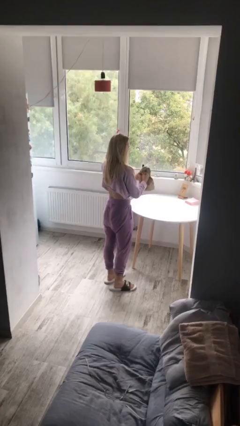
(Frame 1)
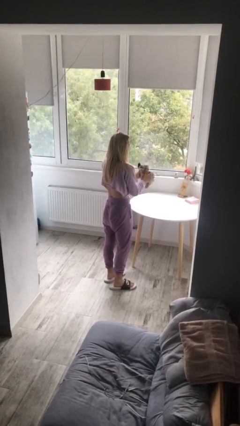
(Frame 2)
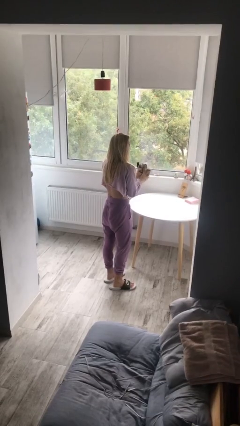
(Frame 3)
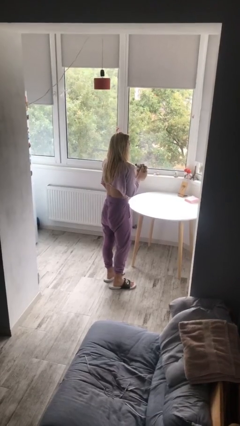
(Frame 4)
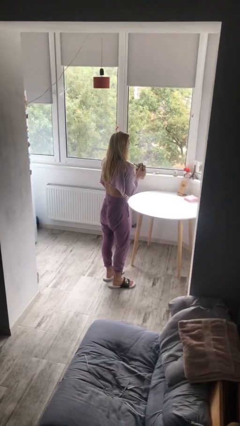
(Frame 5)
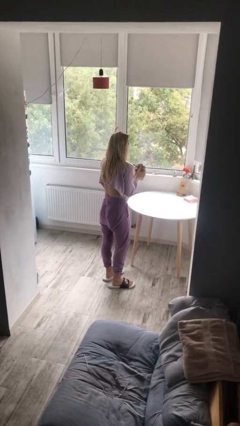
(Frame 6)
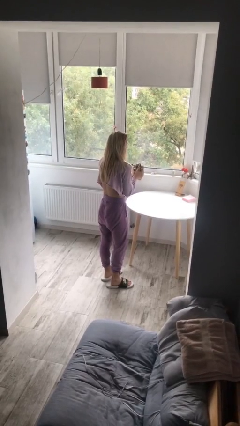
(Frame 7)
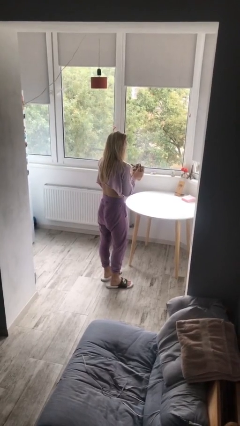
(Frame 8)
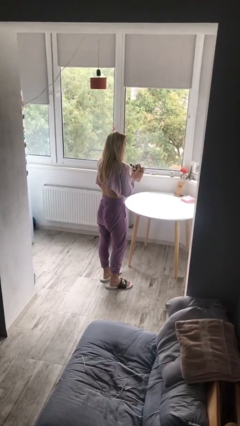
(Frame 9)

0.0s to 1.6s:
person crumples paper

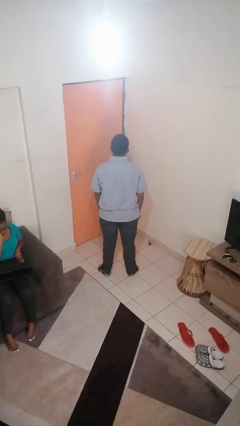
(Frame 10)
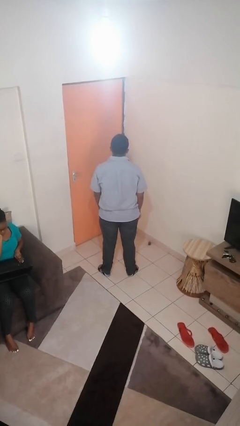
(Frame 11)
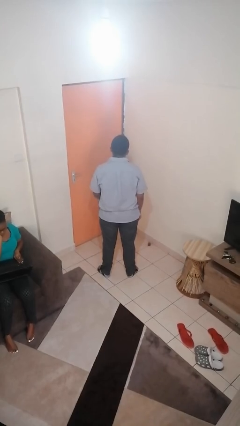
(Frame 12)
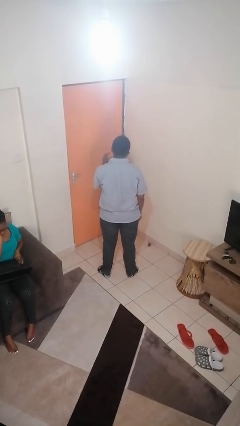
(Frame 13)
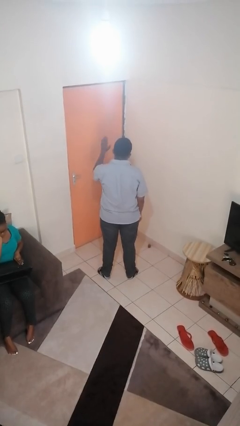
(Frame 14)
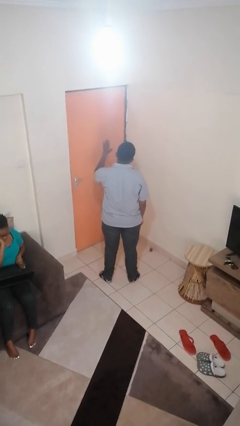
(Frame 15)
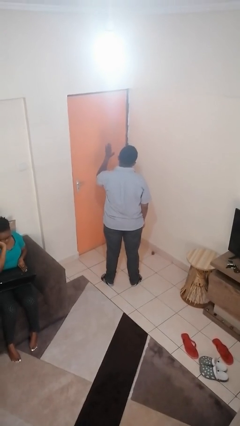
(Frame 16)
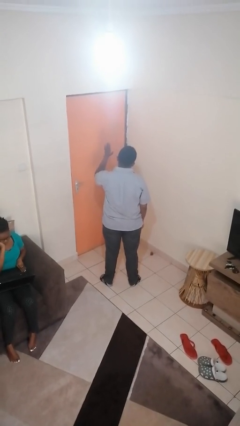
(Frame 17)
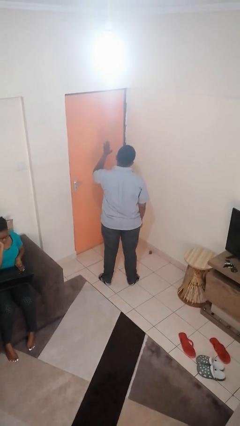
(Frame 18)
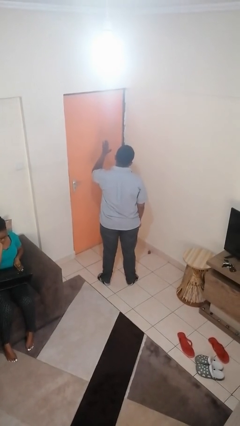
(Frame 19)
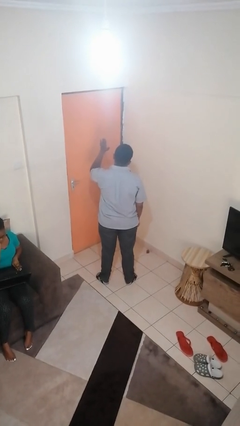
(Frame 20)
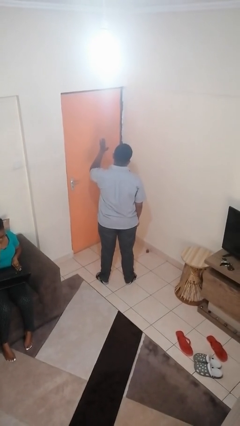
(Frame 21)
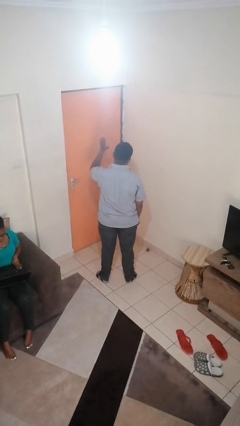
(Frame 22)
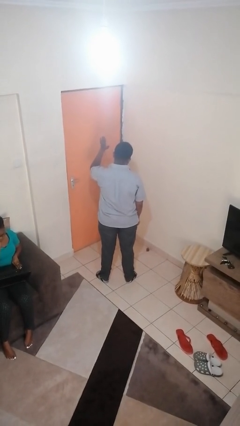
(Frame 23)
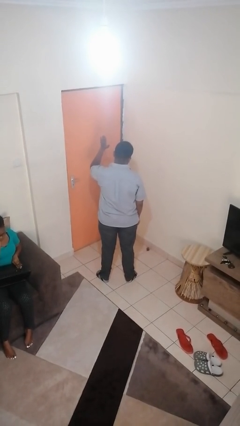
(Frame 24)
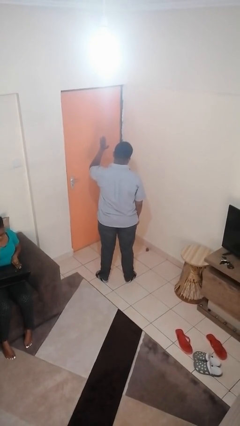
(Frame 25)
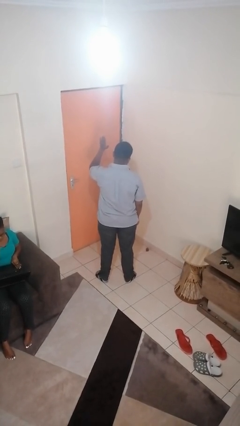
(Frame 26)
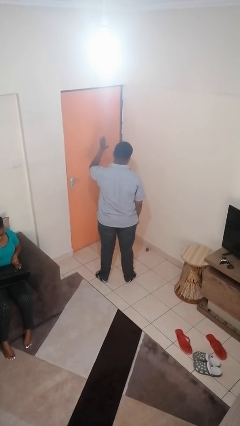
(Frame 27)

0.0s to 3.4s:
person gestures raise hand

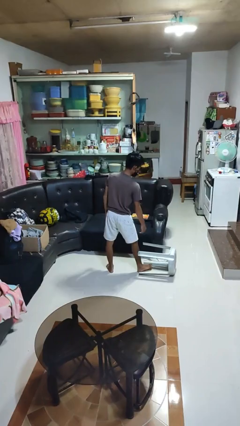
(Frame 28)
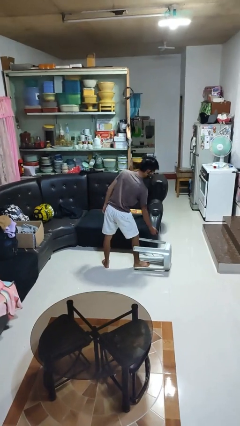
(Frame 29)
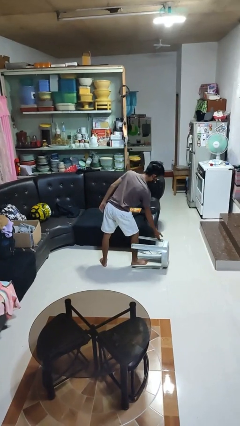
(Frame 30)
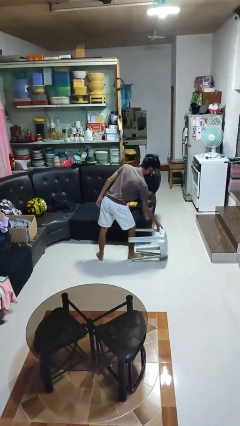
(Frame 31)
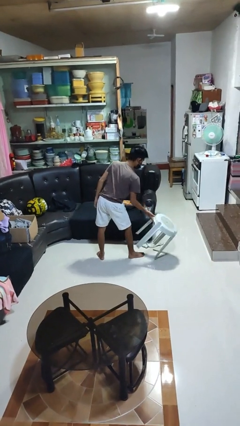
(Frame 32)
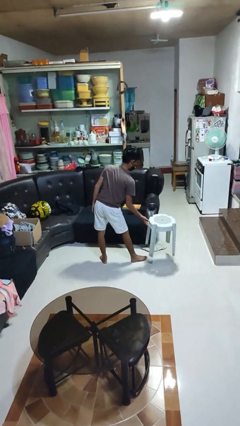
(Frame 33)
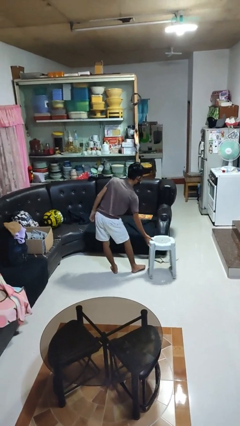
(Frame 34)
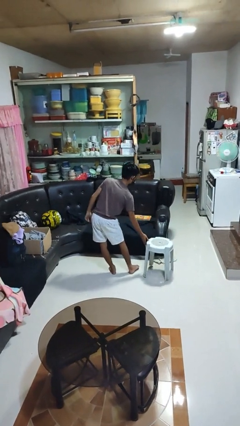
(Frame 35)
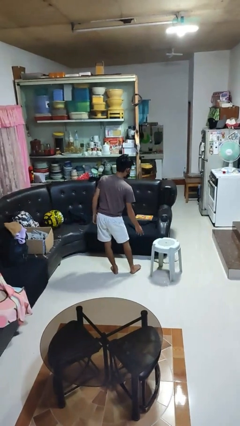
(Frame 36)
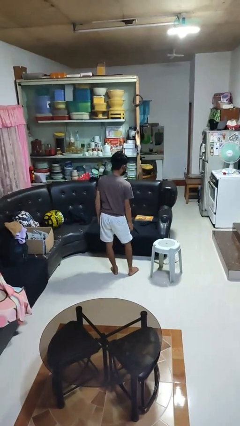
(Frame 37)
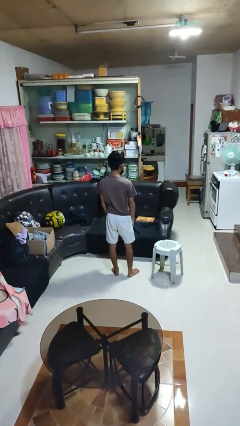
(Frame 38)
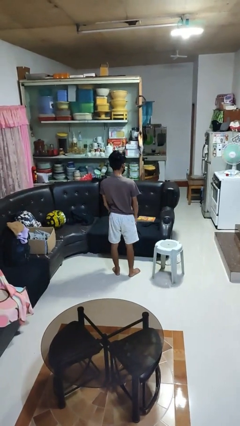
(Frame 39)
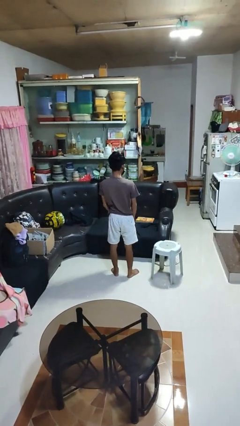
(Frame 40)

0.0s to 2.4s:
person sets upright furniture

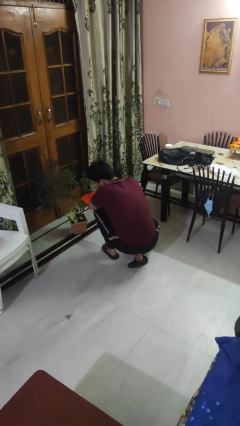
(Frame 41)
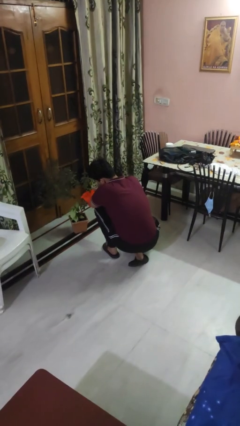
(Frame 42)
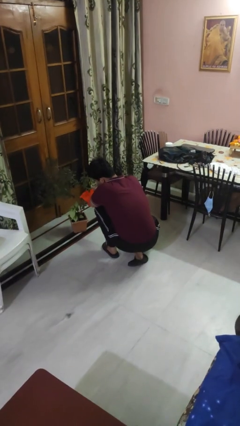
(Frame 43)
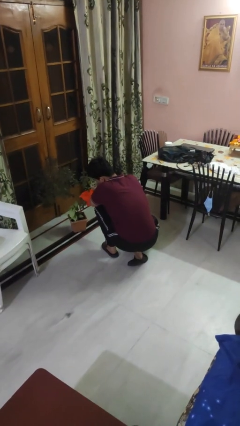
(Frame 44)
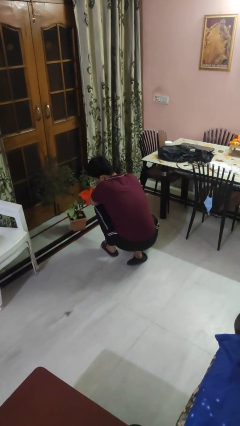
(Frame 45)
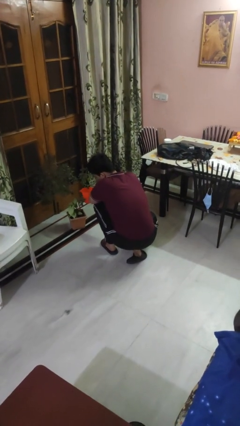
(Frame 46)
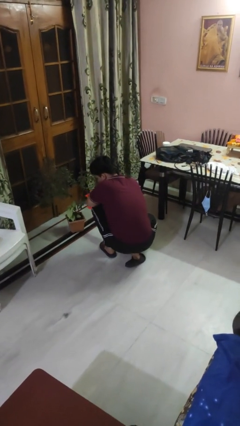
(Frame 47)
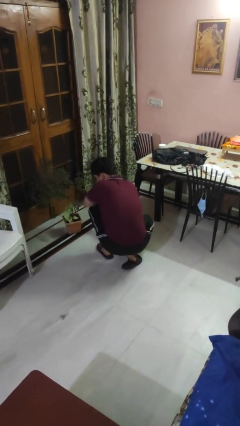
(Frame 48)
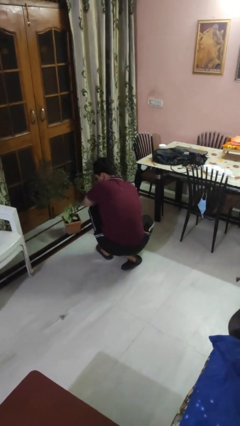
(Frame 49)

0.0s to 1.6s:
person waters houseplant

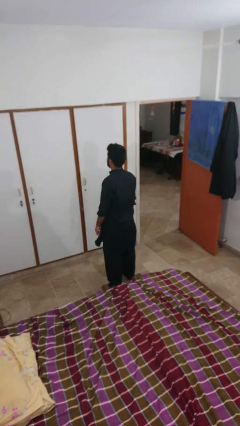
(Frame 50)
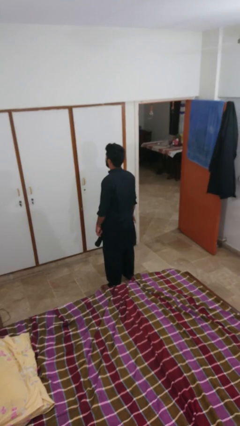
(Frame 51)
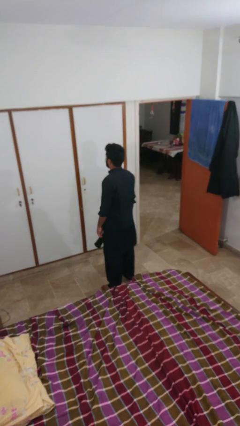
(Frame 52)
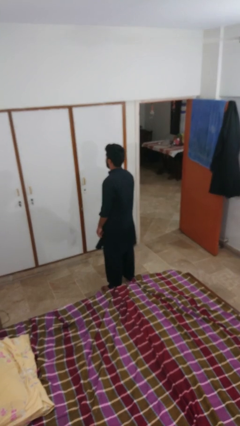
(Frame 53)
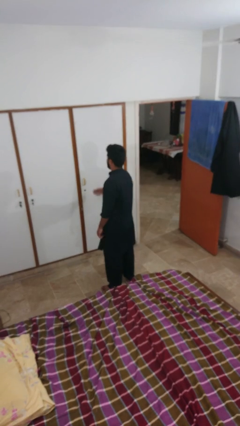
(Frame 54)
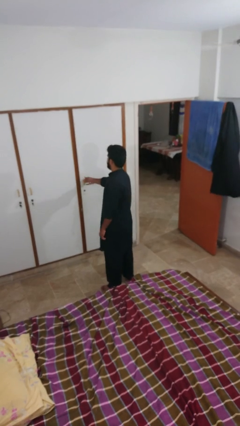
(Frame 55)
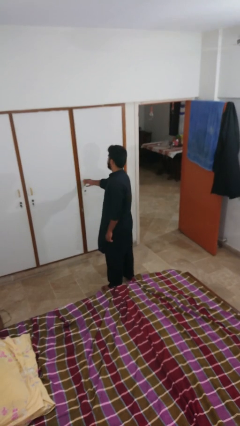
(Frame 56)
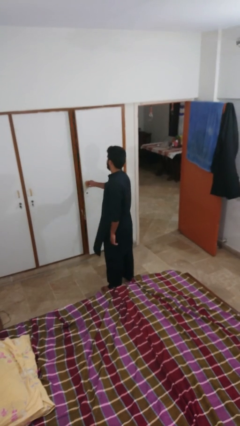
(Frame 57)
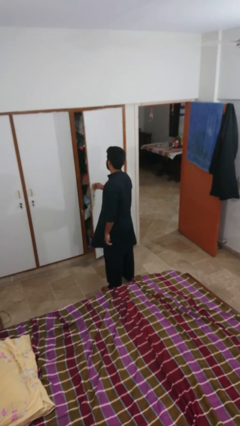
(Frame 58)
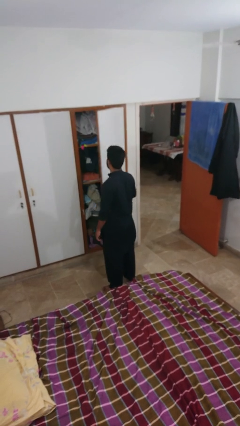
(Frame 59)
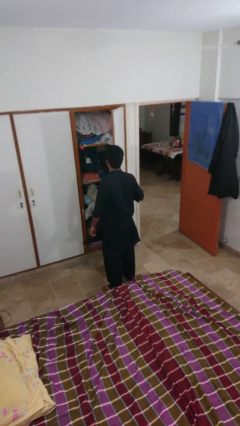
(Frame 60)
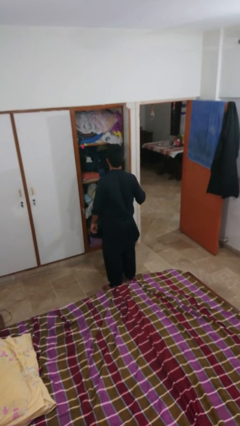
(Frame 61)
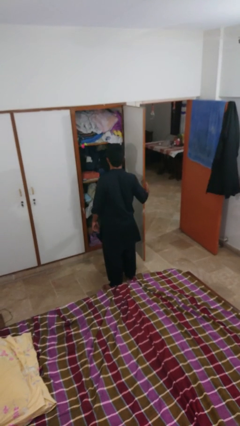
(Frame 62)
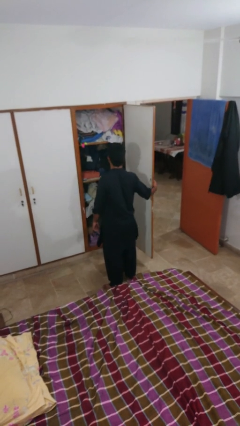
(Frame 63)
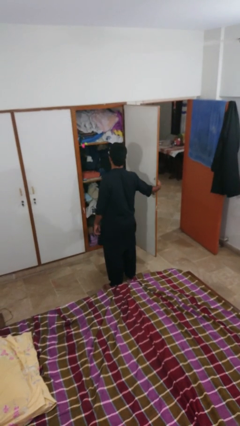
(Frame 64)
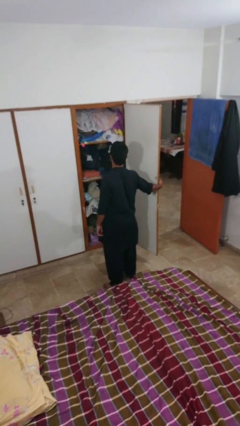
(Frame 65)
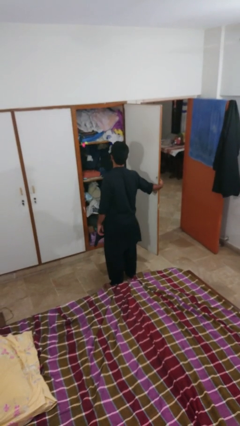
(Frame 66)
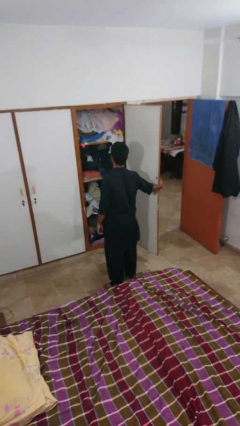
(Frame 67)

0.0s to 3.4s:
person opens closet door

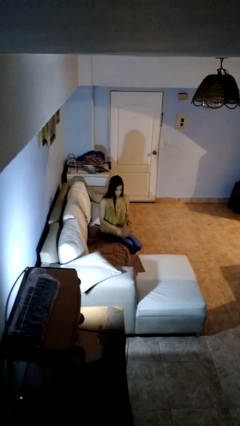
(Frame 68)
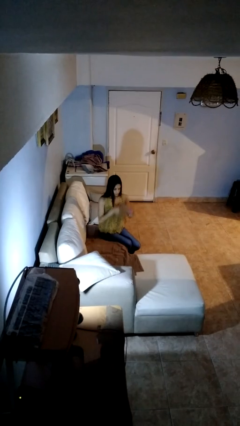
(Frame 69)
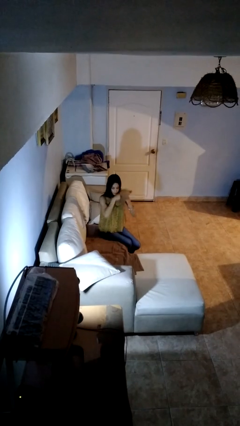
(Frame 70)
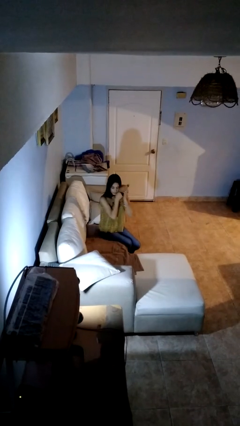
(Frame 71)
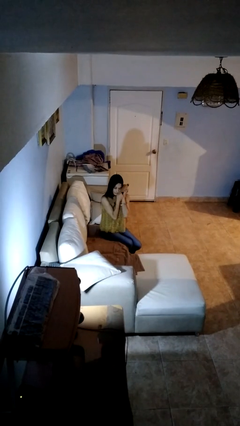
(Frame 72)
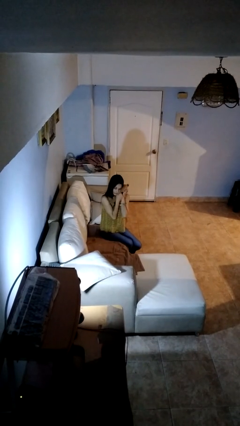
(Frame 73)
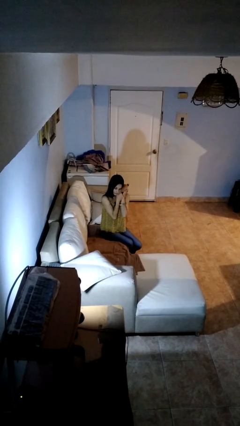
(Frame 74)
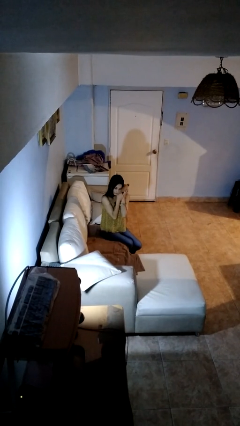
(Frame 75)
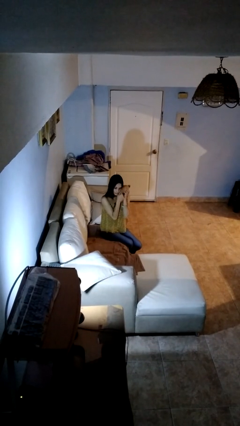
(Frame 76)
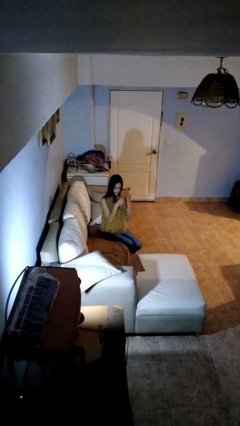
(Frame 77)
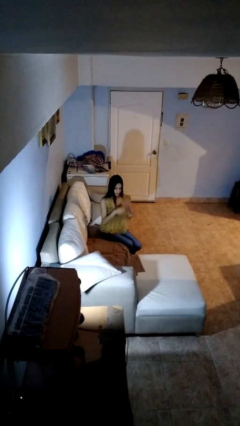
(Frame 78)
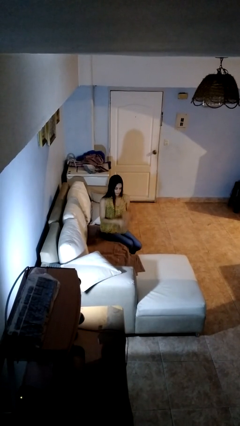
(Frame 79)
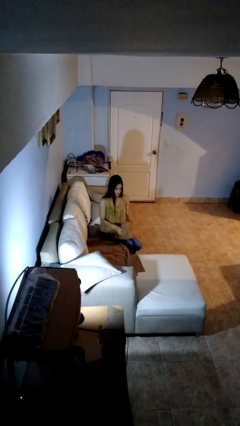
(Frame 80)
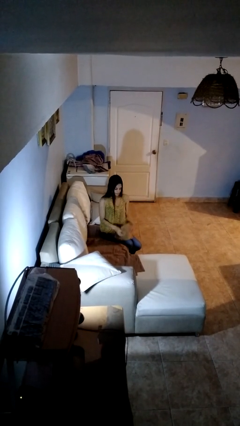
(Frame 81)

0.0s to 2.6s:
person hugs stuffed animal

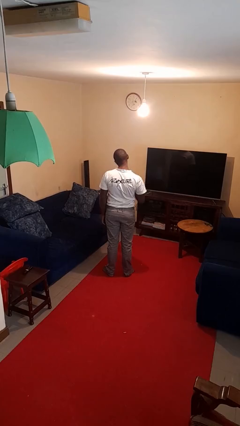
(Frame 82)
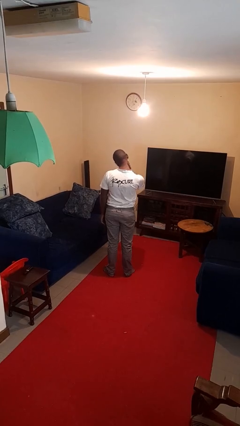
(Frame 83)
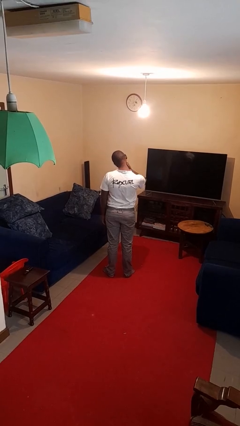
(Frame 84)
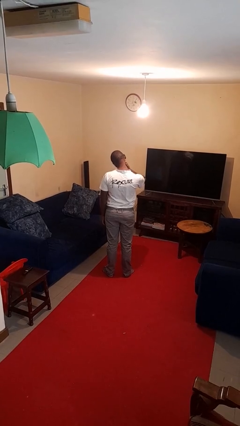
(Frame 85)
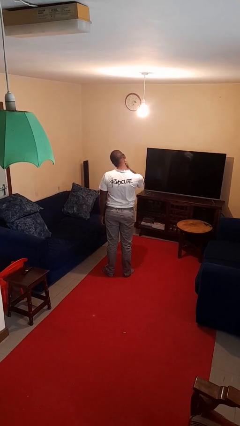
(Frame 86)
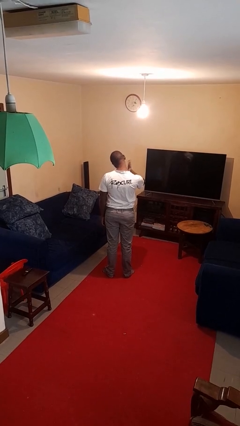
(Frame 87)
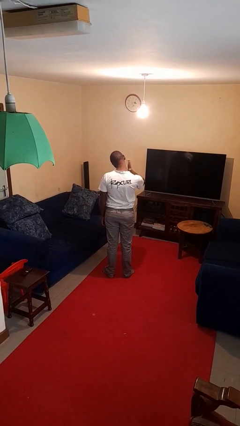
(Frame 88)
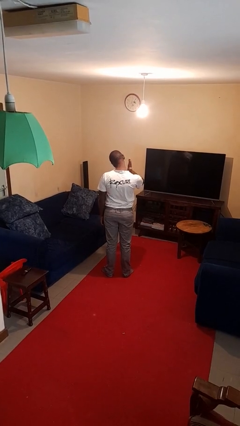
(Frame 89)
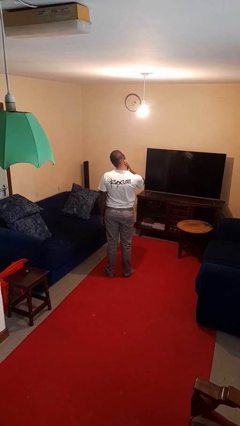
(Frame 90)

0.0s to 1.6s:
person swats bug

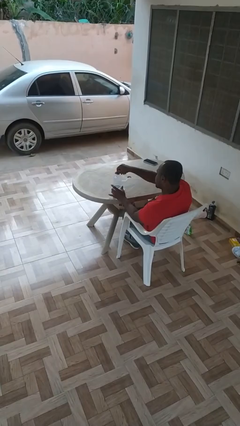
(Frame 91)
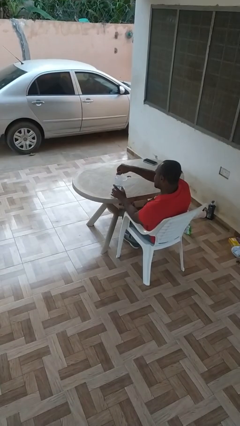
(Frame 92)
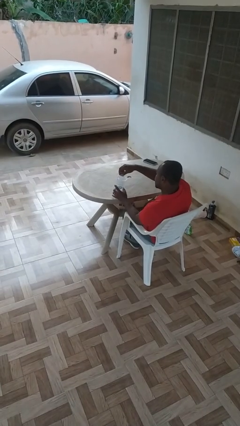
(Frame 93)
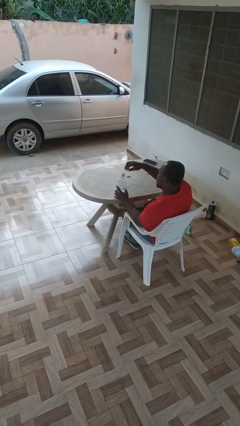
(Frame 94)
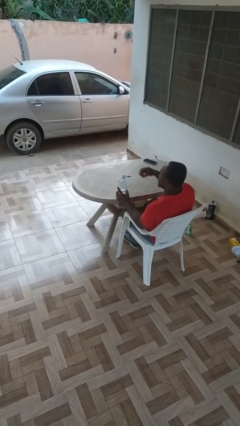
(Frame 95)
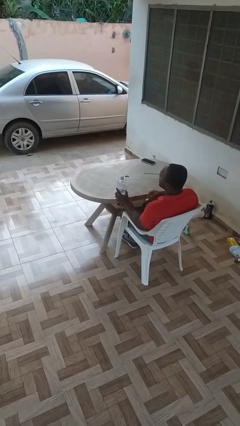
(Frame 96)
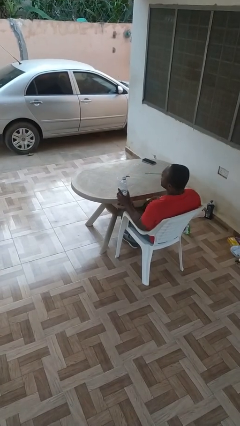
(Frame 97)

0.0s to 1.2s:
person unscrews lid from bottle
